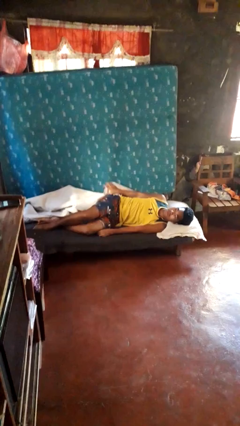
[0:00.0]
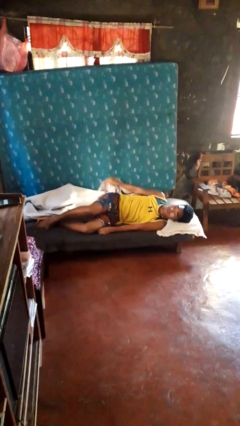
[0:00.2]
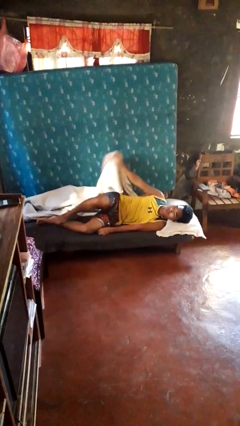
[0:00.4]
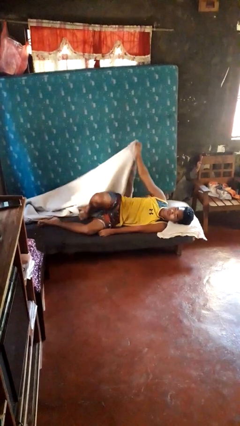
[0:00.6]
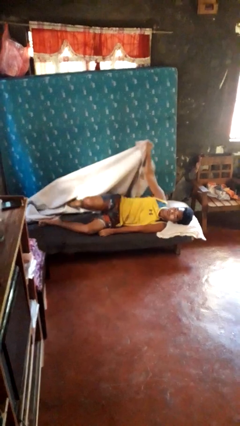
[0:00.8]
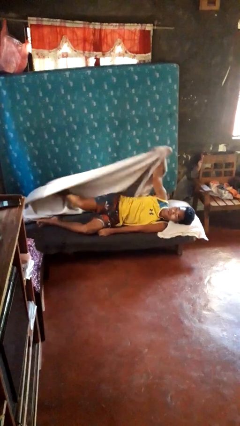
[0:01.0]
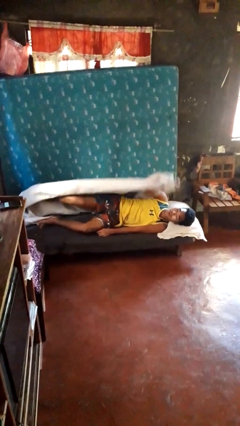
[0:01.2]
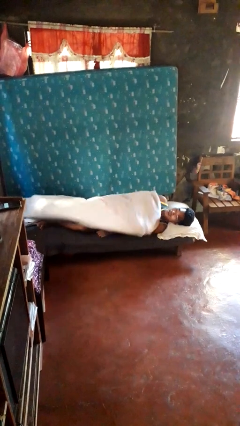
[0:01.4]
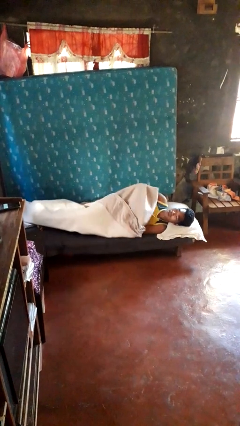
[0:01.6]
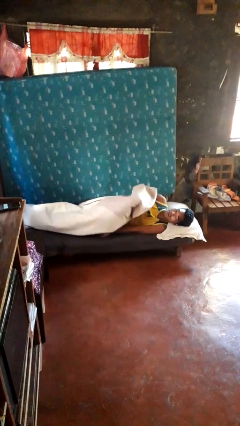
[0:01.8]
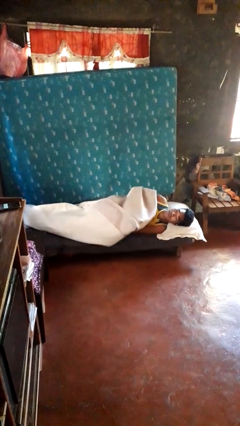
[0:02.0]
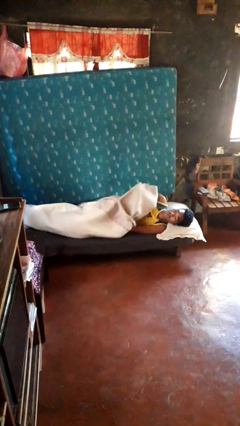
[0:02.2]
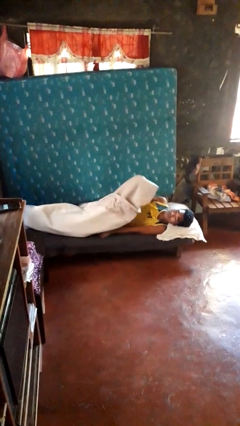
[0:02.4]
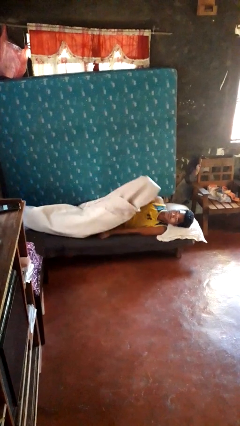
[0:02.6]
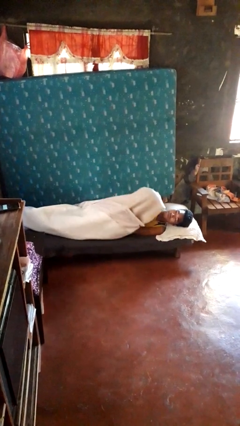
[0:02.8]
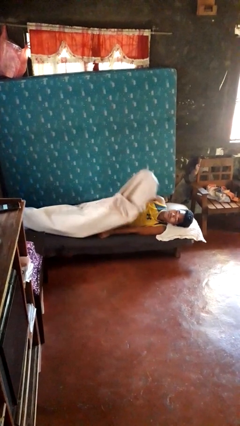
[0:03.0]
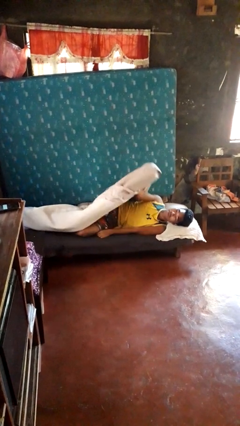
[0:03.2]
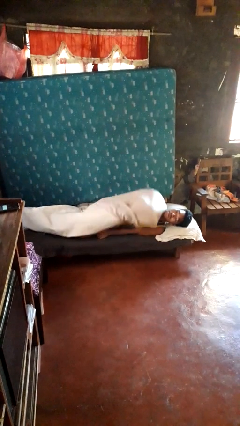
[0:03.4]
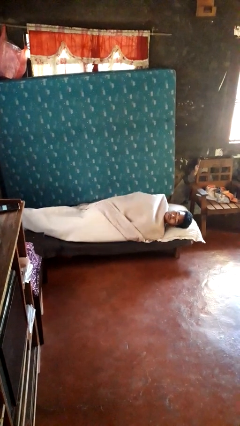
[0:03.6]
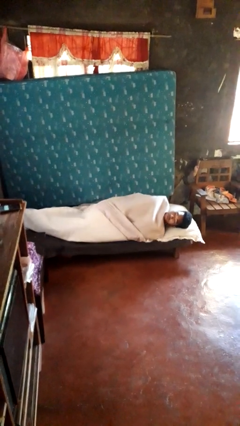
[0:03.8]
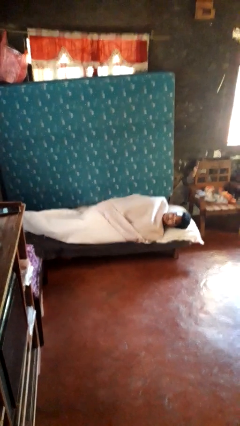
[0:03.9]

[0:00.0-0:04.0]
person covers with bedsheets

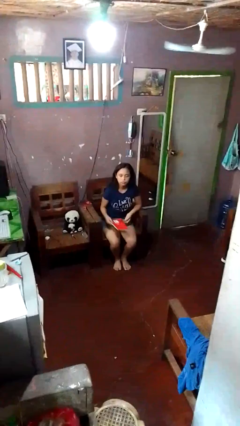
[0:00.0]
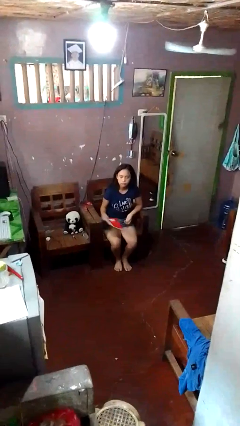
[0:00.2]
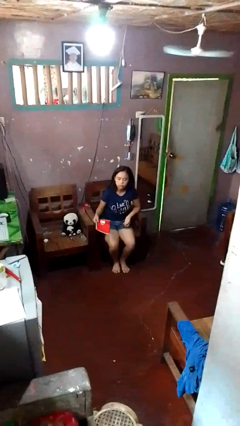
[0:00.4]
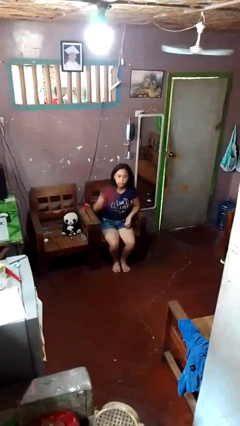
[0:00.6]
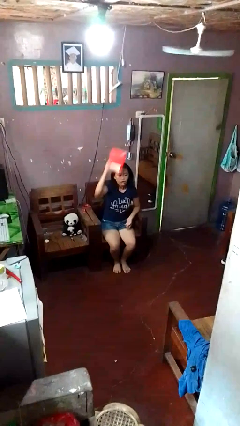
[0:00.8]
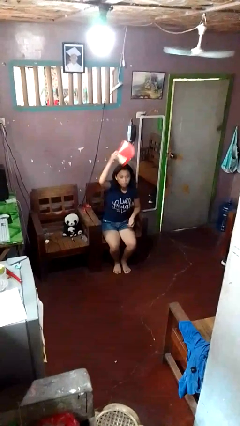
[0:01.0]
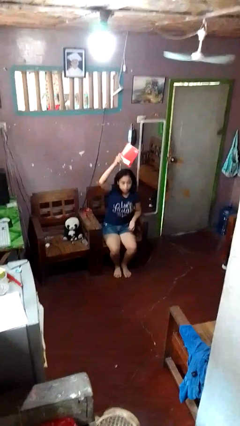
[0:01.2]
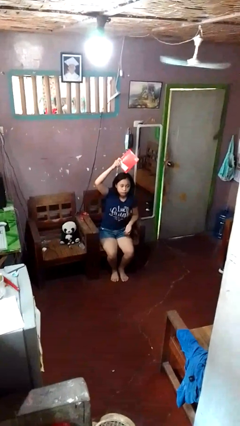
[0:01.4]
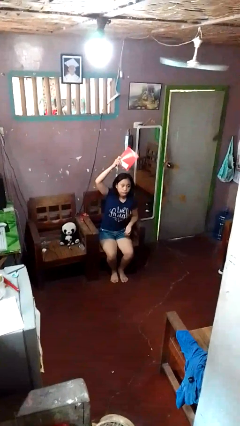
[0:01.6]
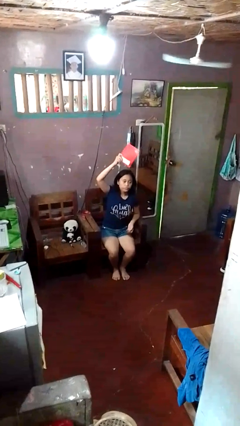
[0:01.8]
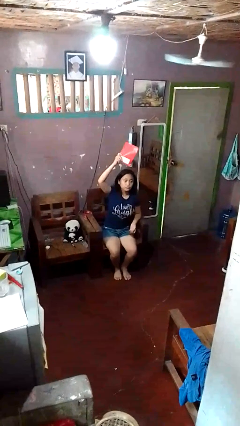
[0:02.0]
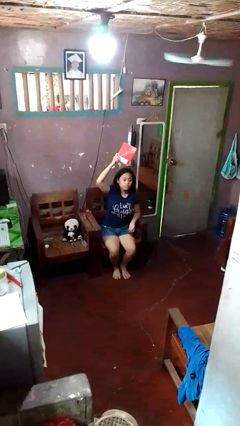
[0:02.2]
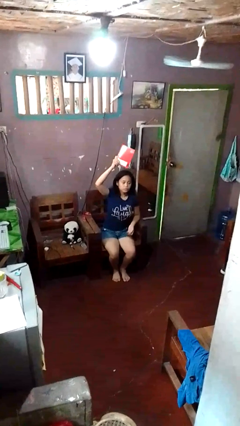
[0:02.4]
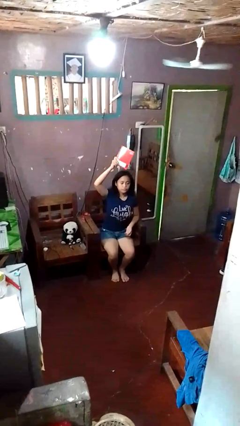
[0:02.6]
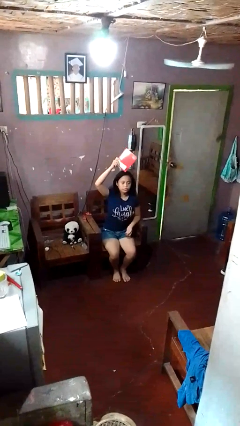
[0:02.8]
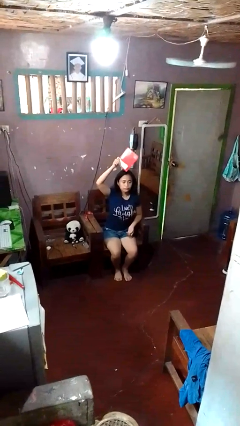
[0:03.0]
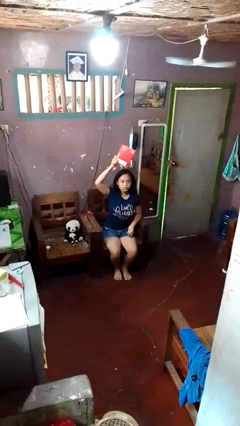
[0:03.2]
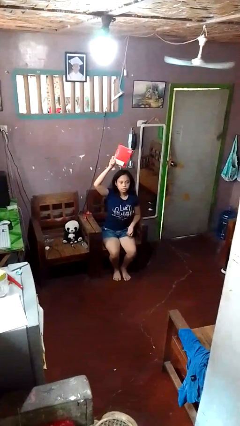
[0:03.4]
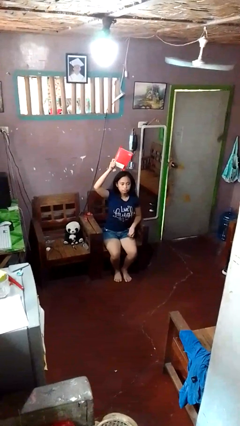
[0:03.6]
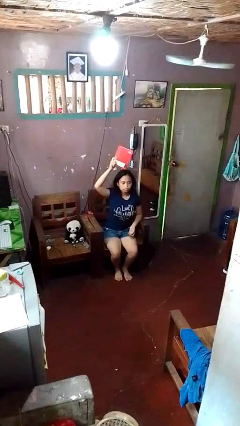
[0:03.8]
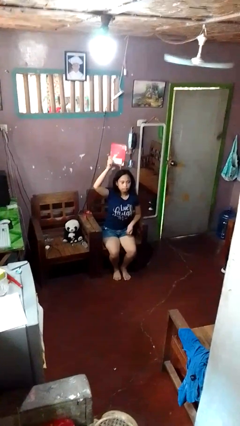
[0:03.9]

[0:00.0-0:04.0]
person holds object above head

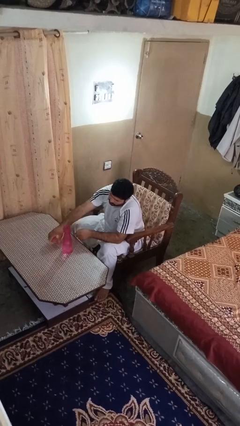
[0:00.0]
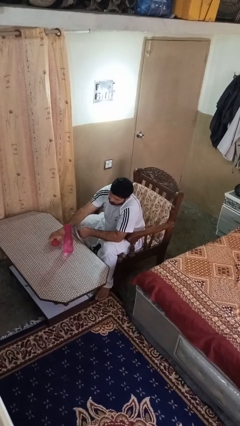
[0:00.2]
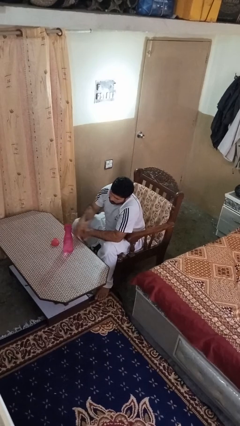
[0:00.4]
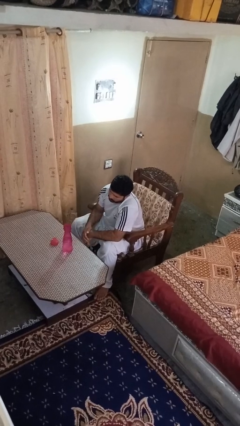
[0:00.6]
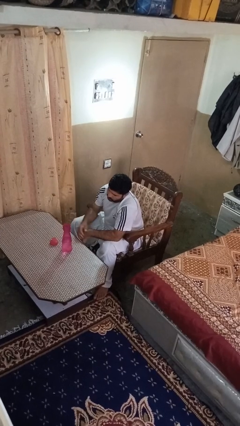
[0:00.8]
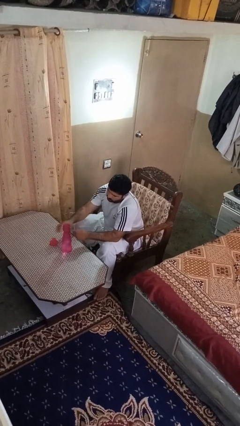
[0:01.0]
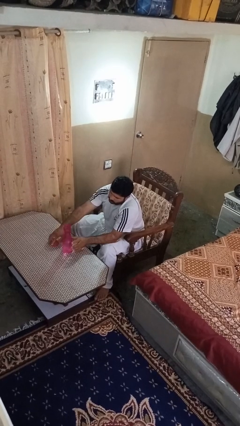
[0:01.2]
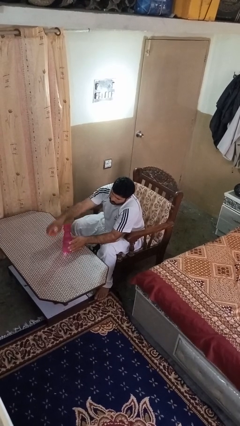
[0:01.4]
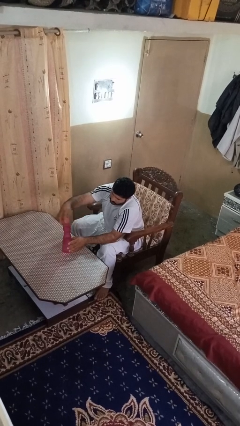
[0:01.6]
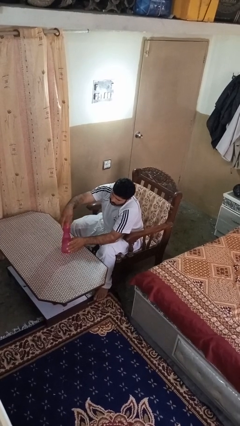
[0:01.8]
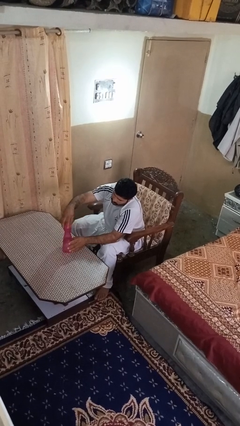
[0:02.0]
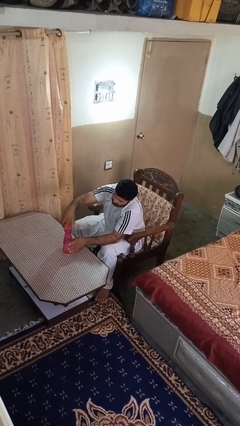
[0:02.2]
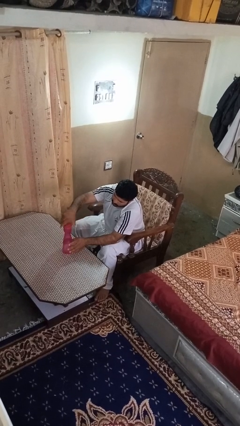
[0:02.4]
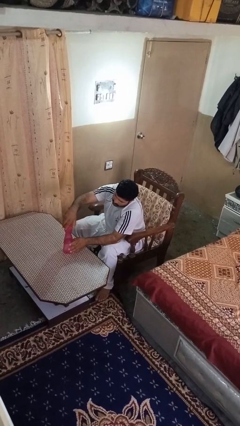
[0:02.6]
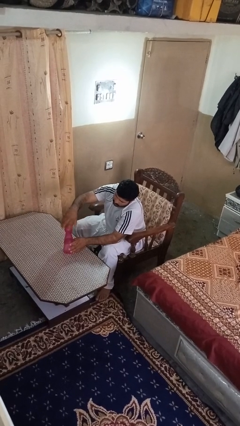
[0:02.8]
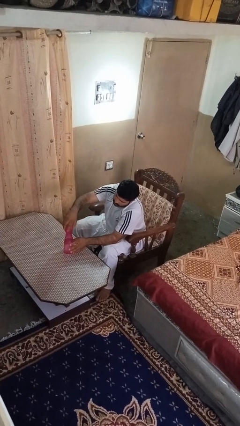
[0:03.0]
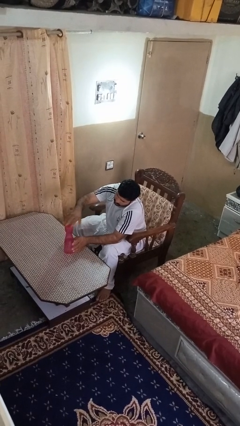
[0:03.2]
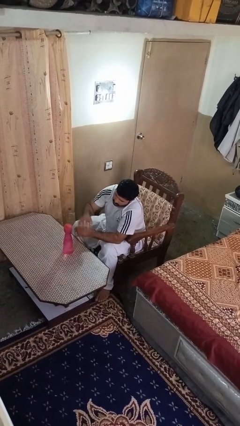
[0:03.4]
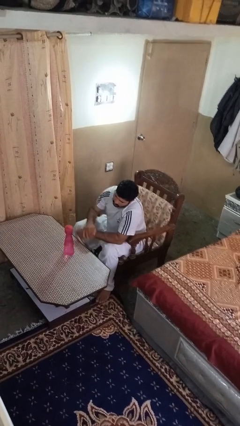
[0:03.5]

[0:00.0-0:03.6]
person screws lid to bottle

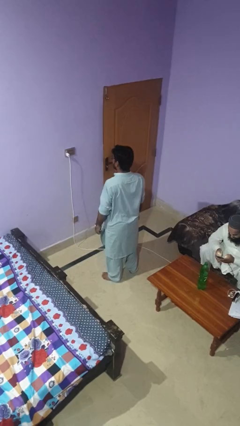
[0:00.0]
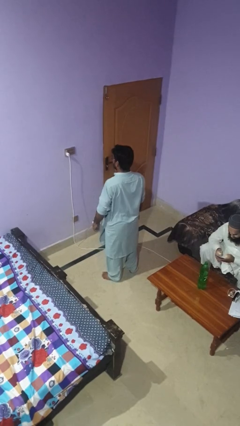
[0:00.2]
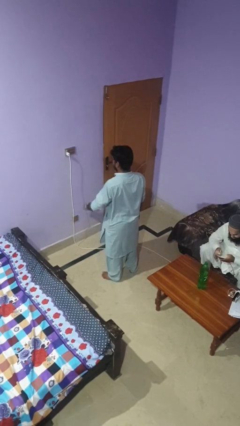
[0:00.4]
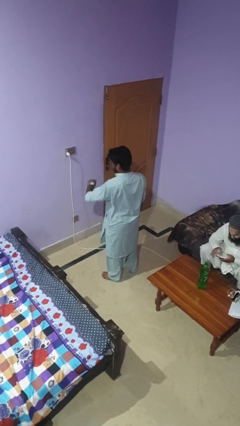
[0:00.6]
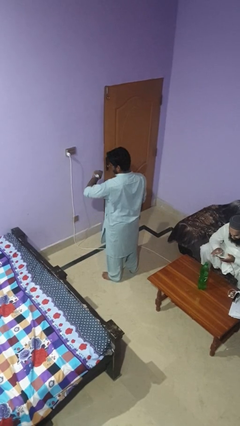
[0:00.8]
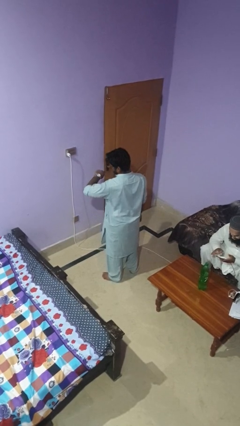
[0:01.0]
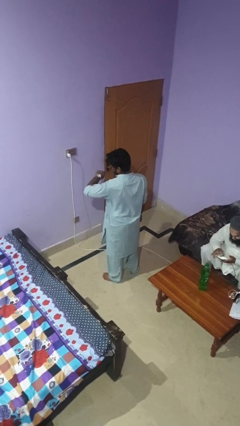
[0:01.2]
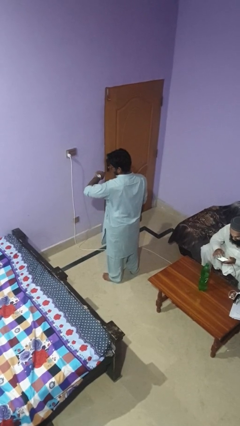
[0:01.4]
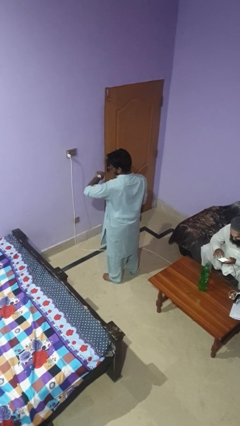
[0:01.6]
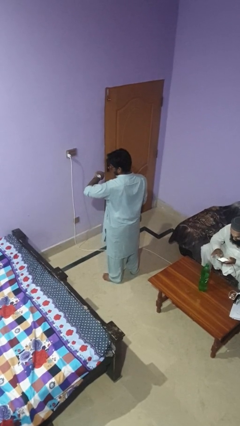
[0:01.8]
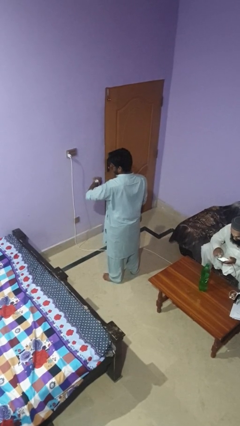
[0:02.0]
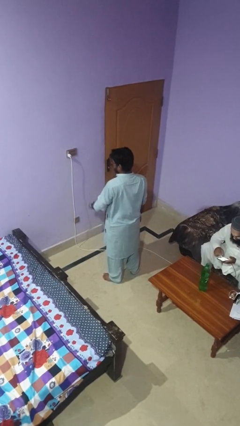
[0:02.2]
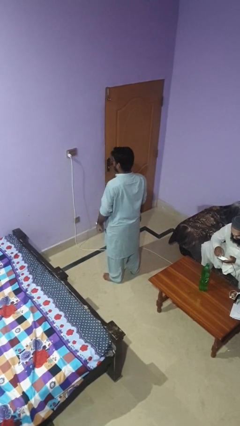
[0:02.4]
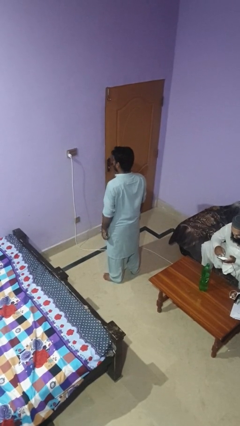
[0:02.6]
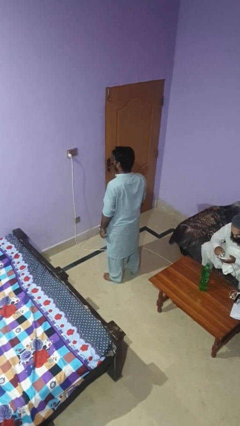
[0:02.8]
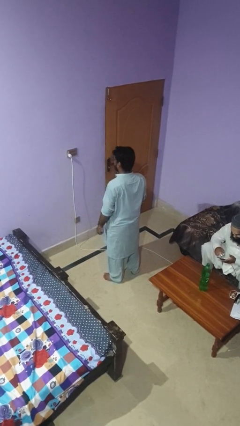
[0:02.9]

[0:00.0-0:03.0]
person looks at wristwatch

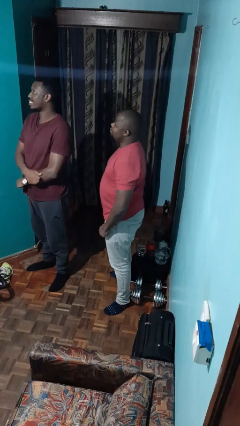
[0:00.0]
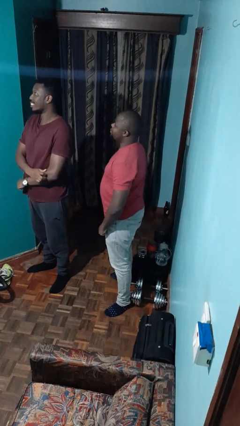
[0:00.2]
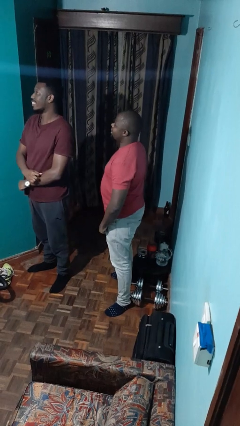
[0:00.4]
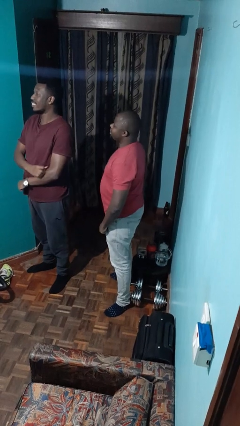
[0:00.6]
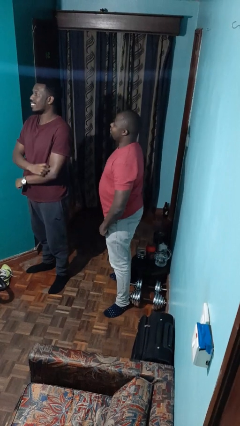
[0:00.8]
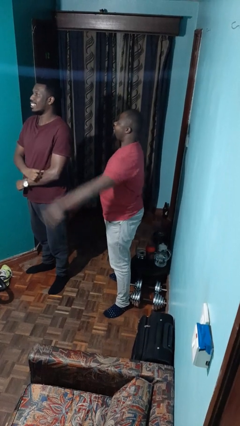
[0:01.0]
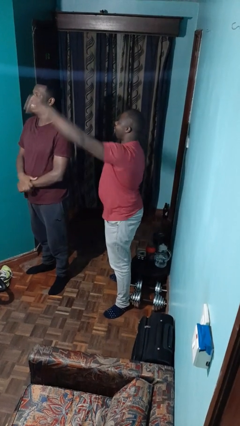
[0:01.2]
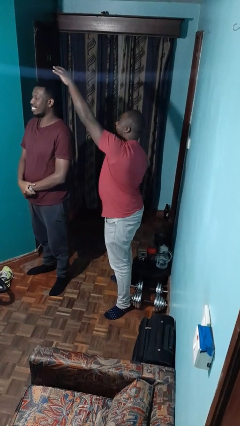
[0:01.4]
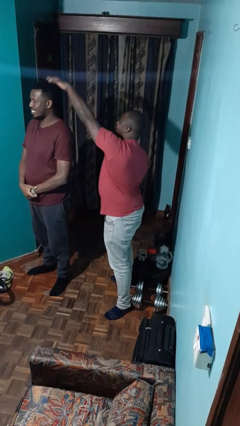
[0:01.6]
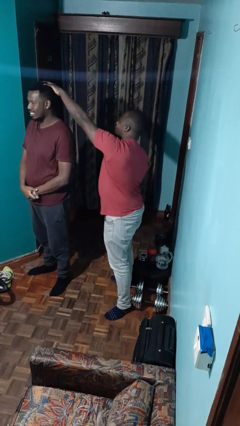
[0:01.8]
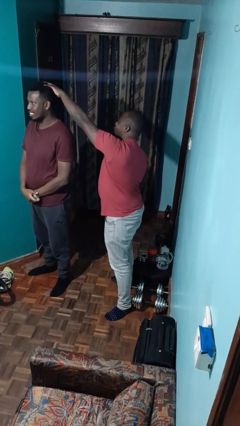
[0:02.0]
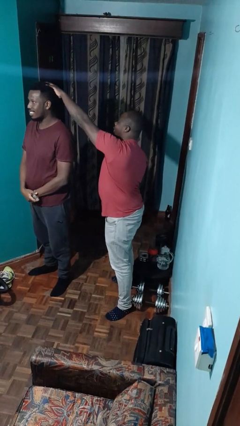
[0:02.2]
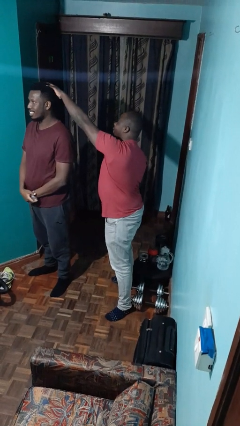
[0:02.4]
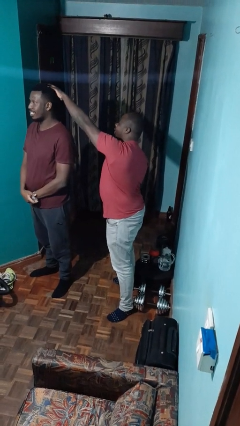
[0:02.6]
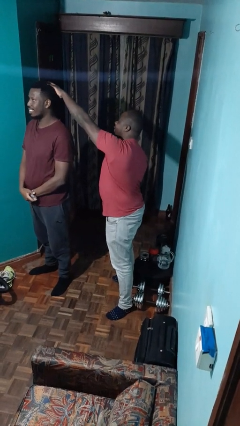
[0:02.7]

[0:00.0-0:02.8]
person grabs person by hair
